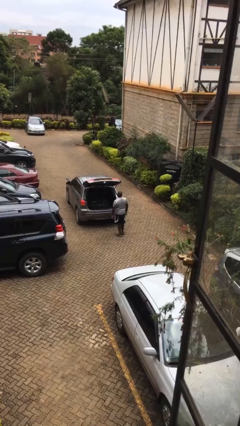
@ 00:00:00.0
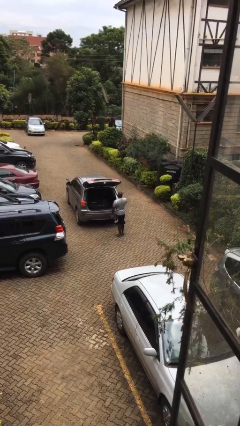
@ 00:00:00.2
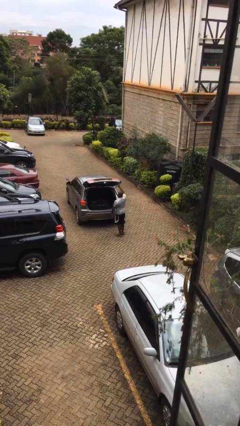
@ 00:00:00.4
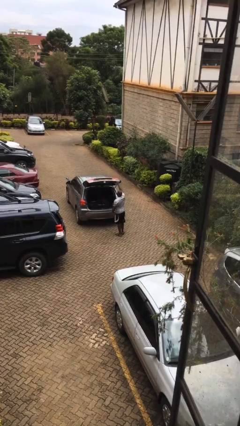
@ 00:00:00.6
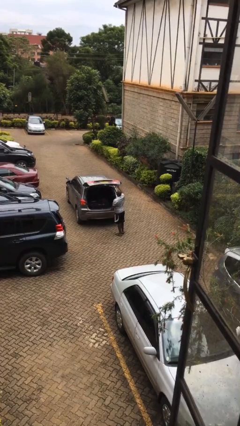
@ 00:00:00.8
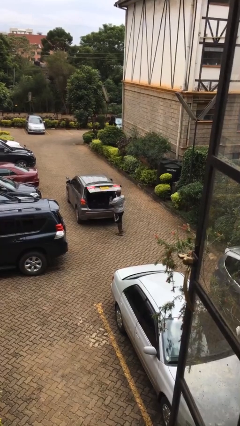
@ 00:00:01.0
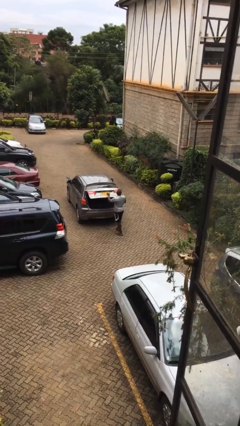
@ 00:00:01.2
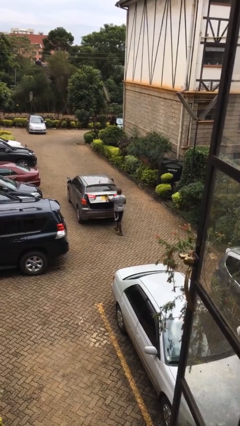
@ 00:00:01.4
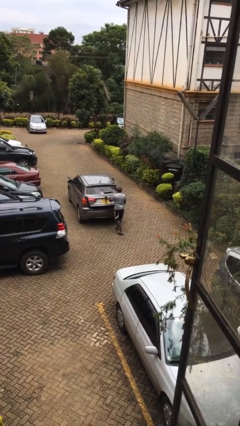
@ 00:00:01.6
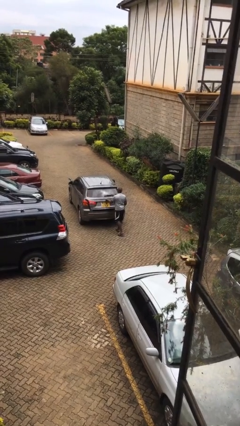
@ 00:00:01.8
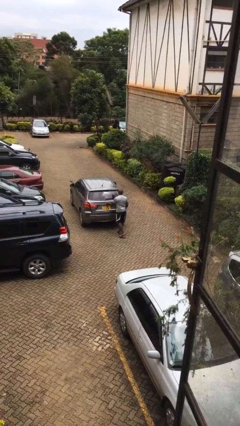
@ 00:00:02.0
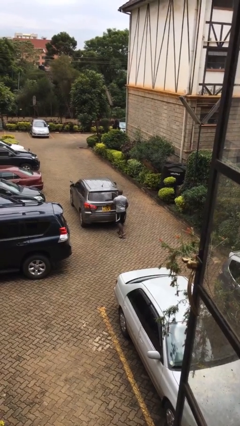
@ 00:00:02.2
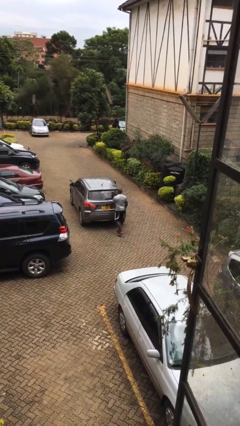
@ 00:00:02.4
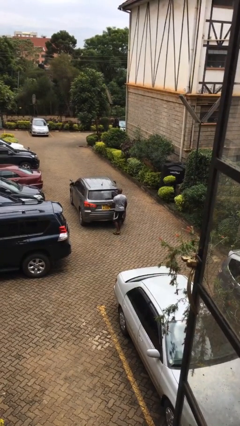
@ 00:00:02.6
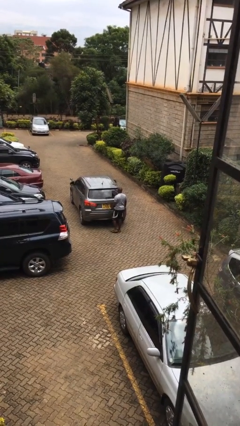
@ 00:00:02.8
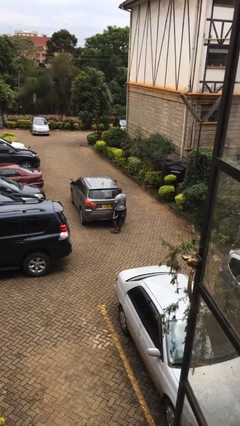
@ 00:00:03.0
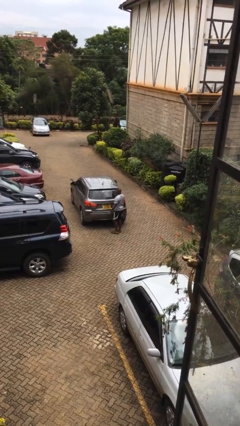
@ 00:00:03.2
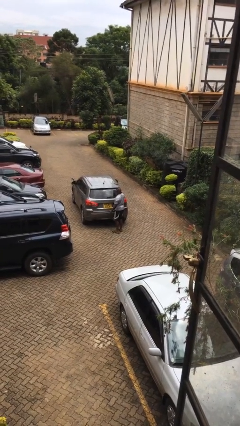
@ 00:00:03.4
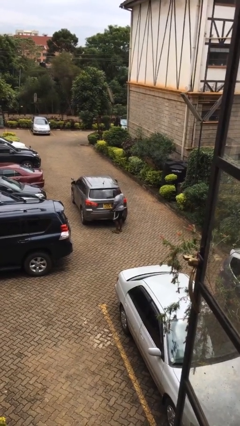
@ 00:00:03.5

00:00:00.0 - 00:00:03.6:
person closes car trunk

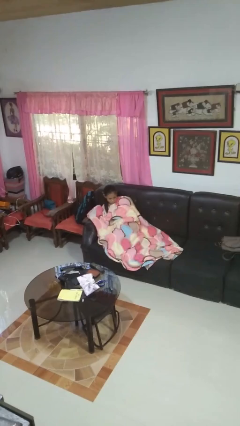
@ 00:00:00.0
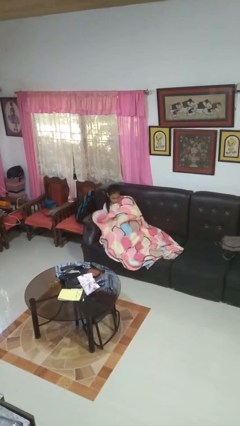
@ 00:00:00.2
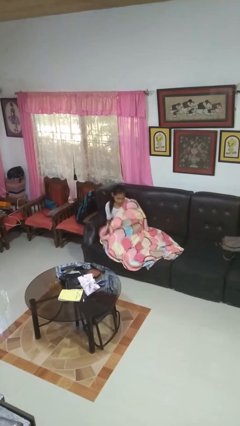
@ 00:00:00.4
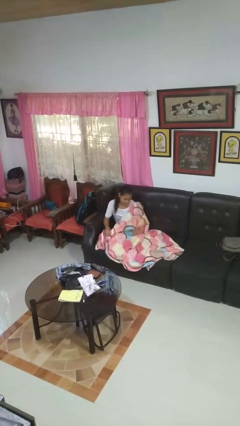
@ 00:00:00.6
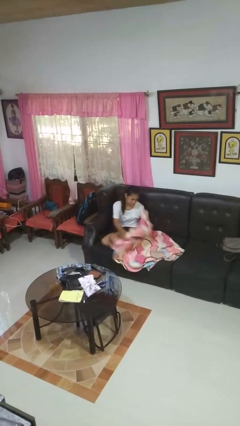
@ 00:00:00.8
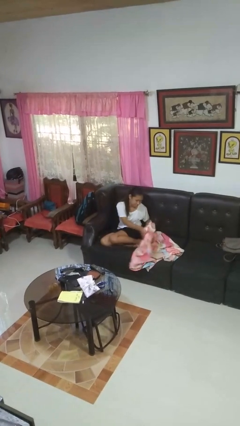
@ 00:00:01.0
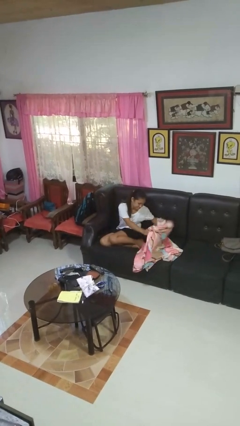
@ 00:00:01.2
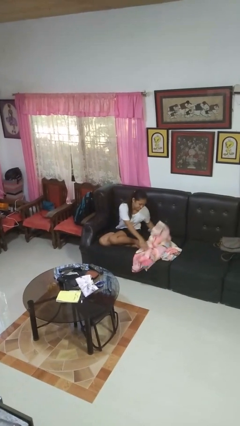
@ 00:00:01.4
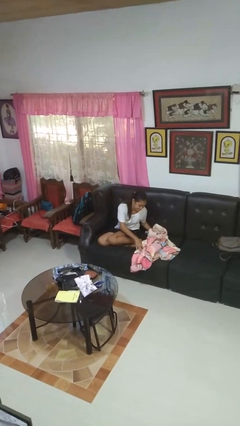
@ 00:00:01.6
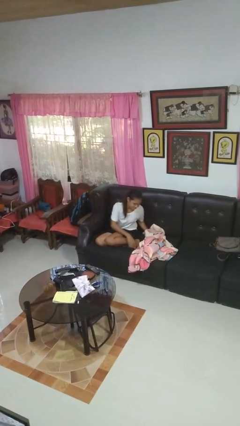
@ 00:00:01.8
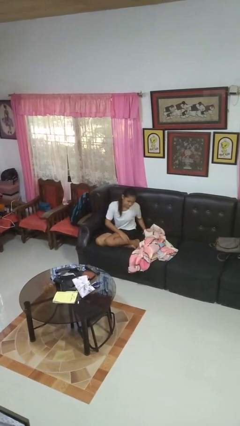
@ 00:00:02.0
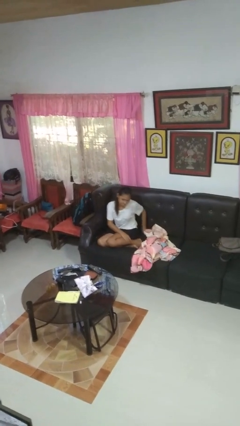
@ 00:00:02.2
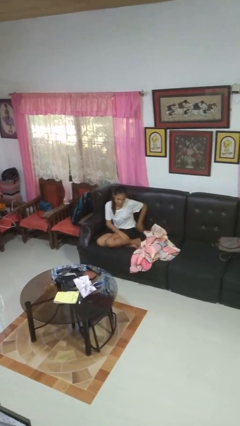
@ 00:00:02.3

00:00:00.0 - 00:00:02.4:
person uncovers with blanket

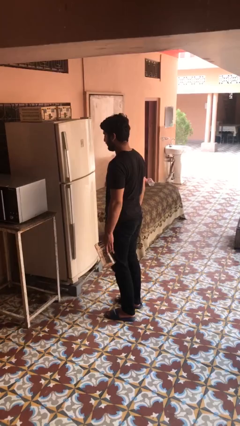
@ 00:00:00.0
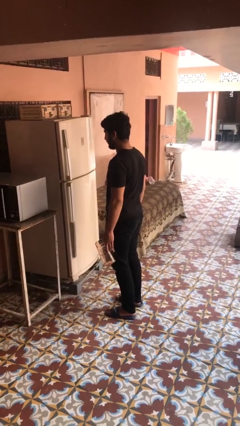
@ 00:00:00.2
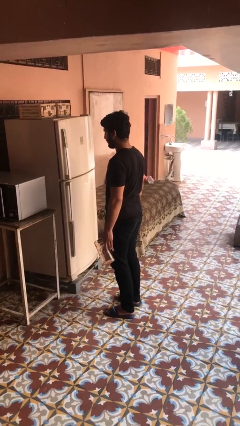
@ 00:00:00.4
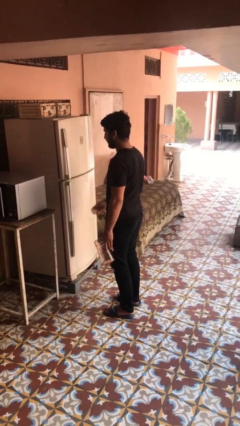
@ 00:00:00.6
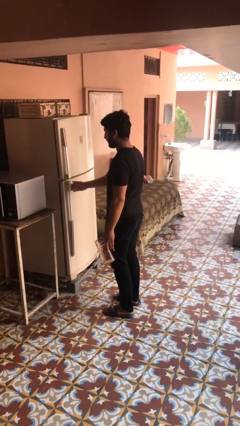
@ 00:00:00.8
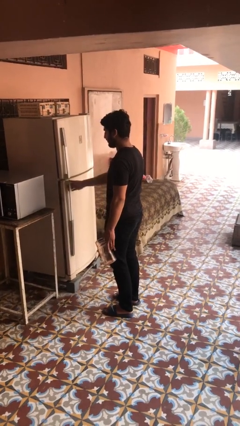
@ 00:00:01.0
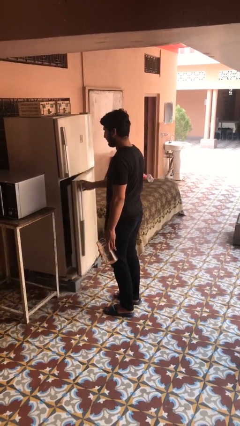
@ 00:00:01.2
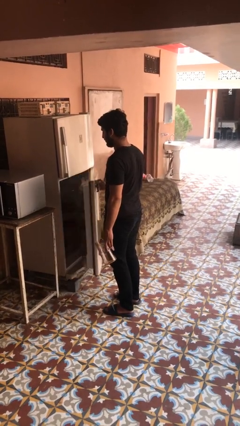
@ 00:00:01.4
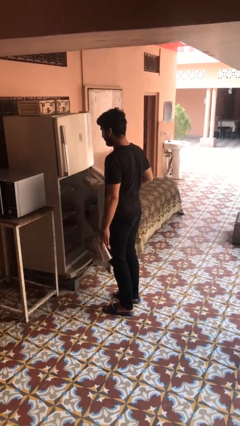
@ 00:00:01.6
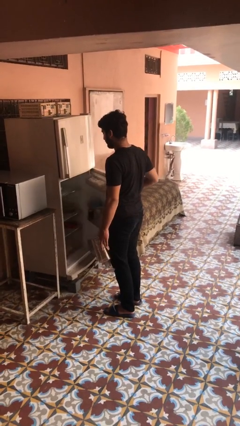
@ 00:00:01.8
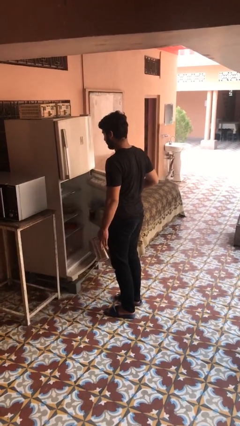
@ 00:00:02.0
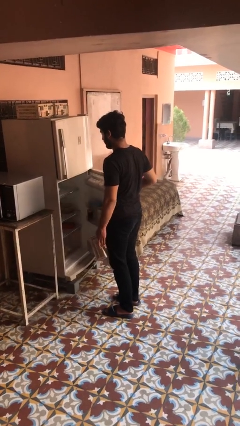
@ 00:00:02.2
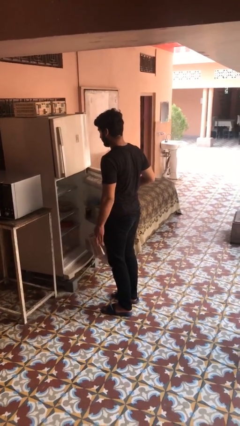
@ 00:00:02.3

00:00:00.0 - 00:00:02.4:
person opens refrigerator

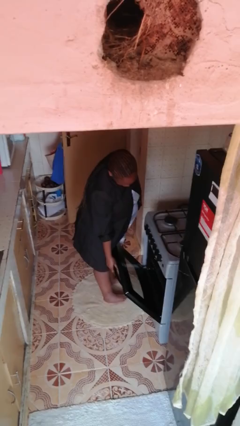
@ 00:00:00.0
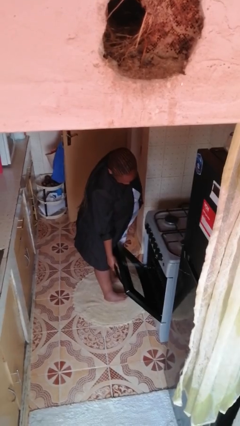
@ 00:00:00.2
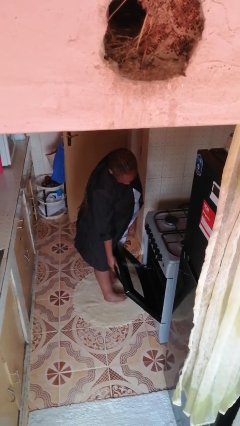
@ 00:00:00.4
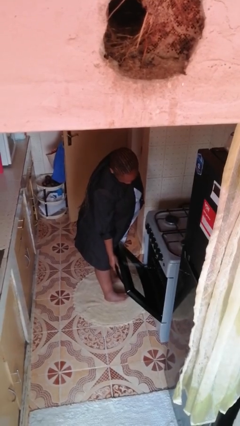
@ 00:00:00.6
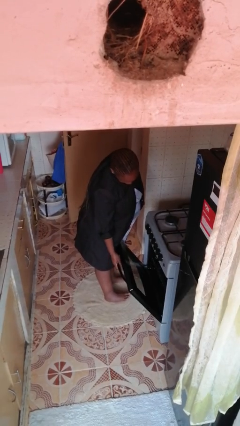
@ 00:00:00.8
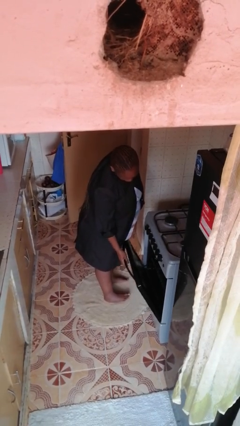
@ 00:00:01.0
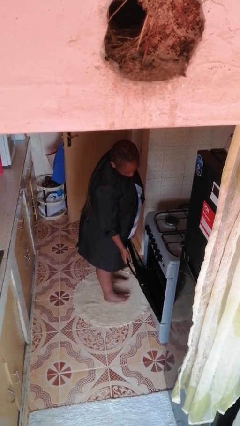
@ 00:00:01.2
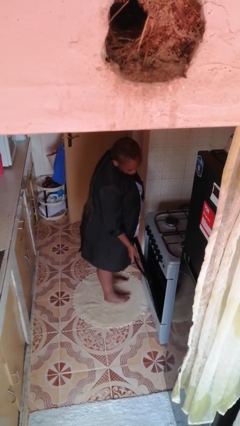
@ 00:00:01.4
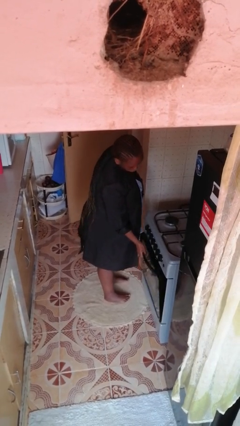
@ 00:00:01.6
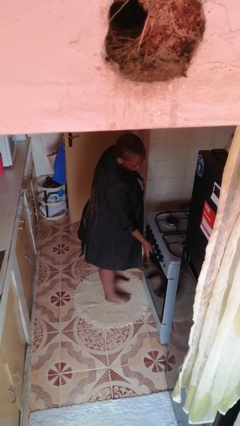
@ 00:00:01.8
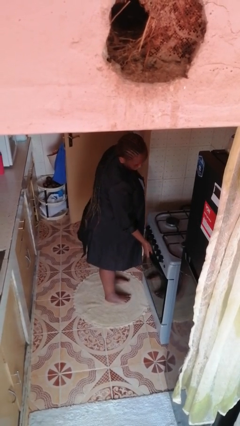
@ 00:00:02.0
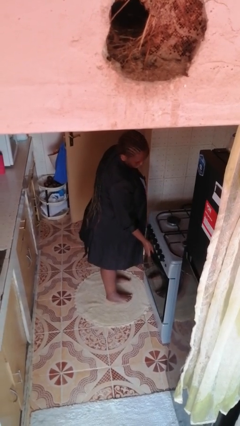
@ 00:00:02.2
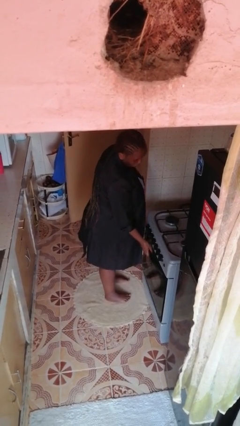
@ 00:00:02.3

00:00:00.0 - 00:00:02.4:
person closes oven door

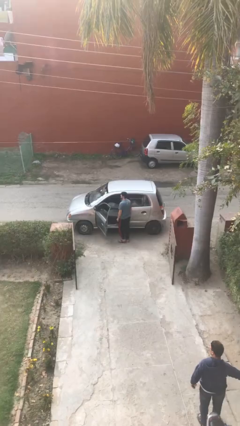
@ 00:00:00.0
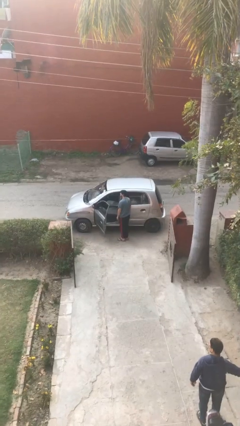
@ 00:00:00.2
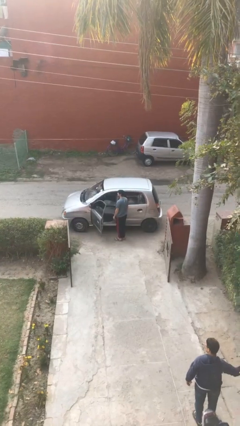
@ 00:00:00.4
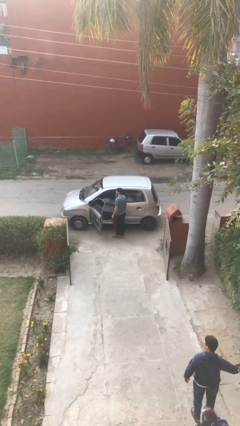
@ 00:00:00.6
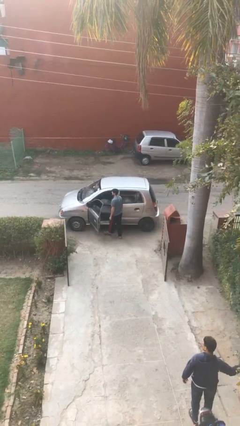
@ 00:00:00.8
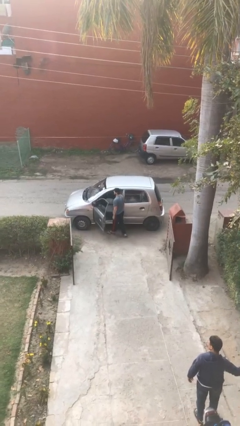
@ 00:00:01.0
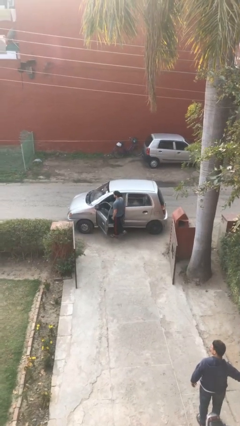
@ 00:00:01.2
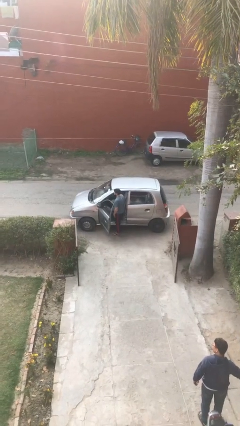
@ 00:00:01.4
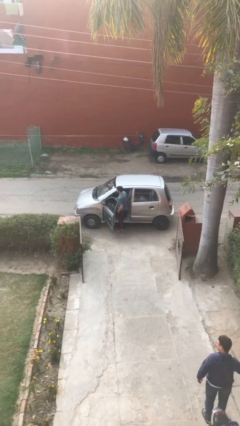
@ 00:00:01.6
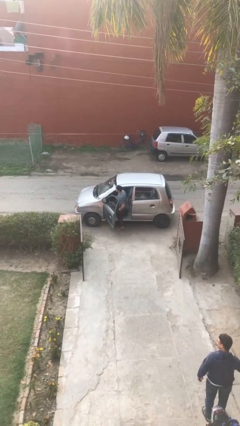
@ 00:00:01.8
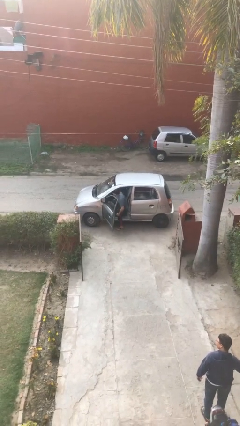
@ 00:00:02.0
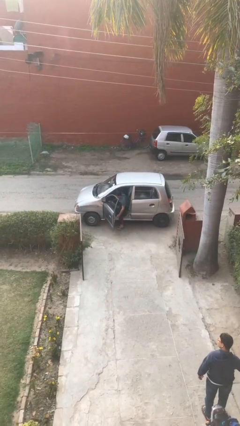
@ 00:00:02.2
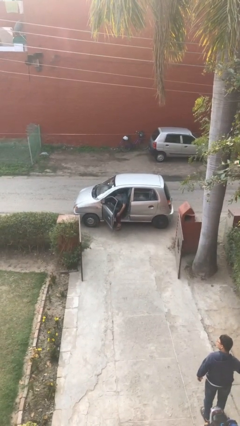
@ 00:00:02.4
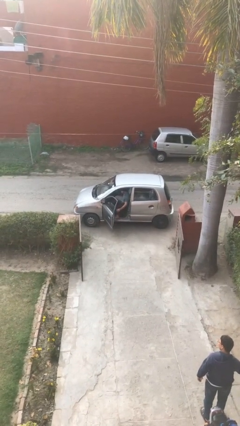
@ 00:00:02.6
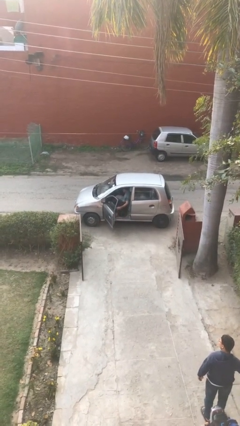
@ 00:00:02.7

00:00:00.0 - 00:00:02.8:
person enters car

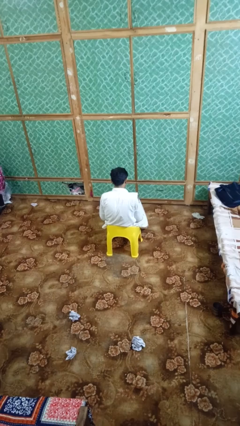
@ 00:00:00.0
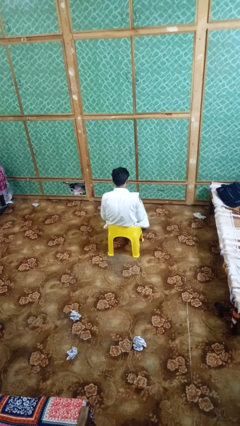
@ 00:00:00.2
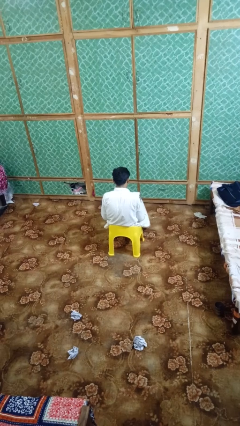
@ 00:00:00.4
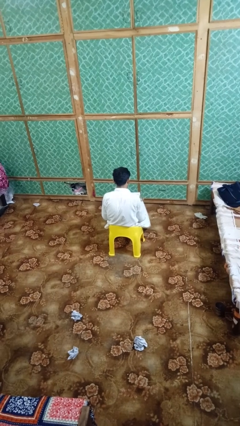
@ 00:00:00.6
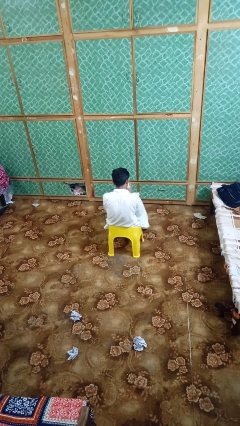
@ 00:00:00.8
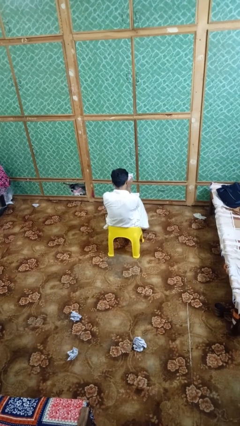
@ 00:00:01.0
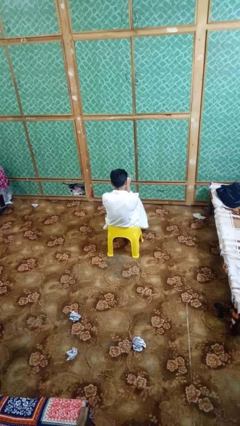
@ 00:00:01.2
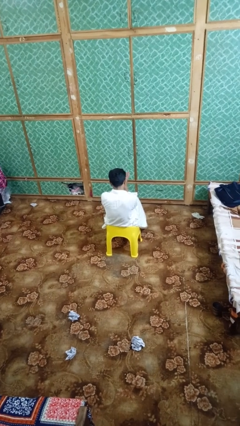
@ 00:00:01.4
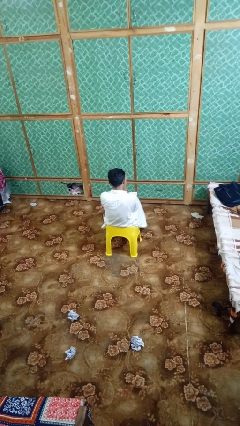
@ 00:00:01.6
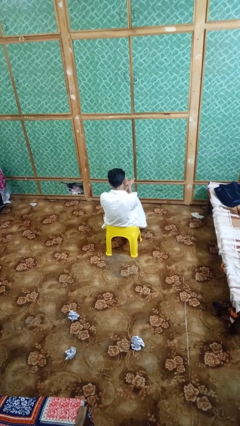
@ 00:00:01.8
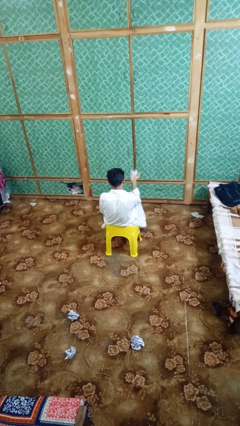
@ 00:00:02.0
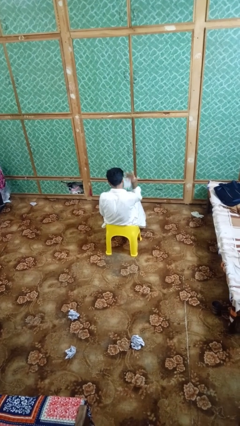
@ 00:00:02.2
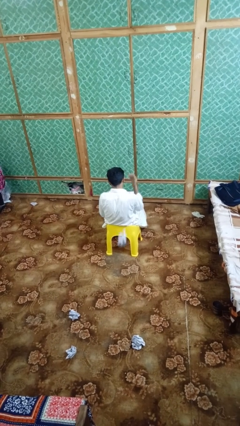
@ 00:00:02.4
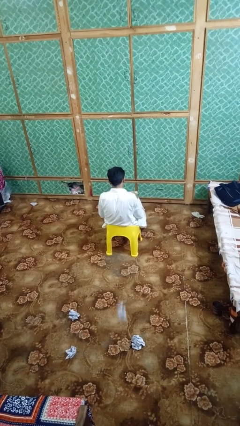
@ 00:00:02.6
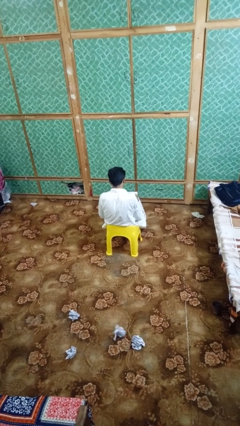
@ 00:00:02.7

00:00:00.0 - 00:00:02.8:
person crumples paper

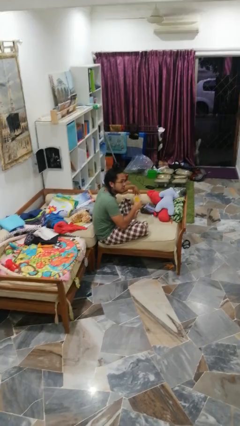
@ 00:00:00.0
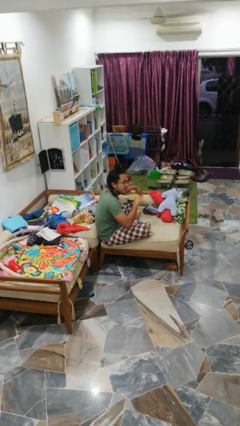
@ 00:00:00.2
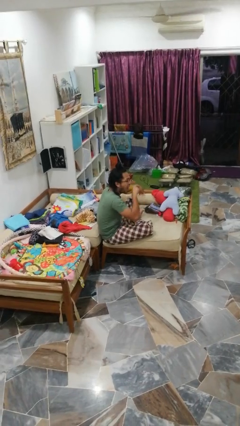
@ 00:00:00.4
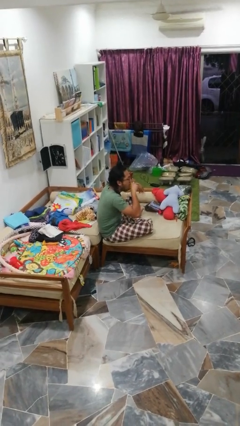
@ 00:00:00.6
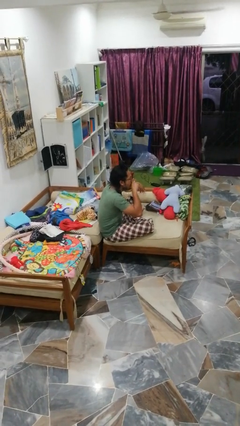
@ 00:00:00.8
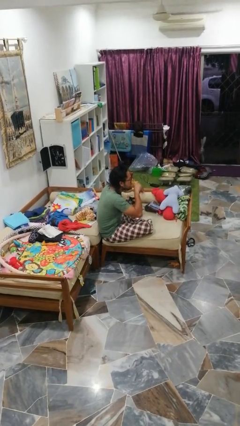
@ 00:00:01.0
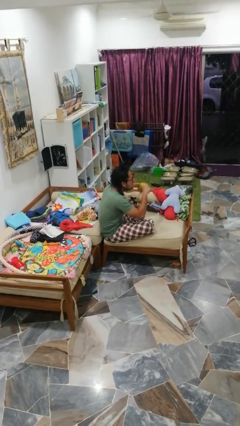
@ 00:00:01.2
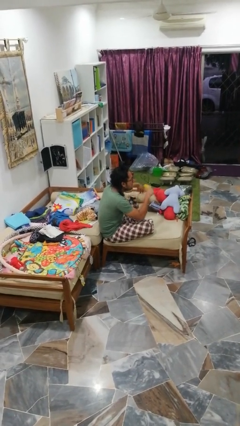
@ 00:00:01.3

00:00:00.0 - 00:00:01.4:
person eats banana
